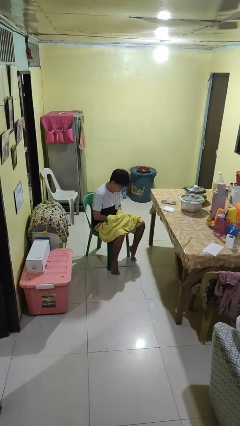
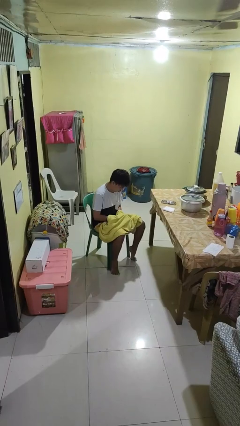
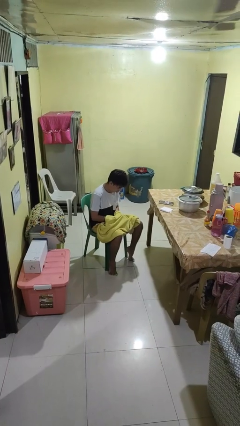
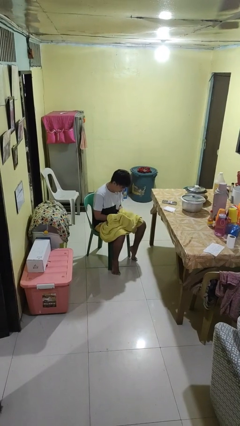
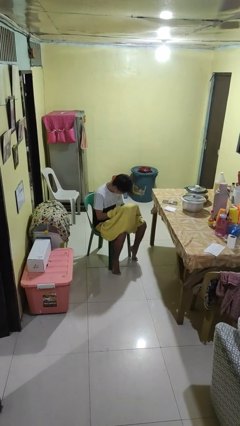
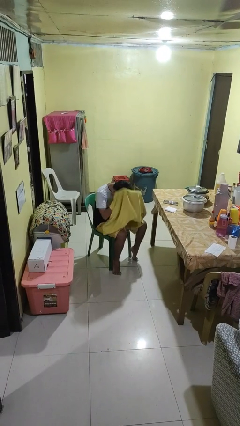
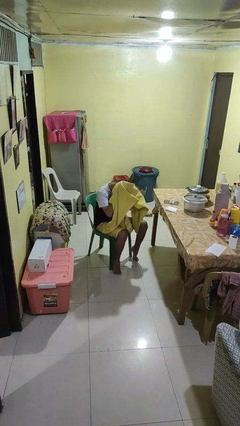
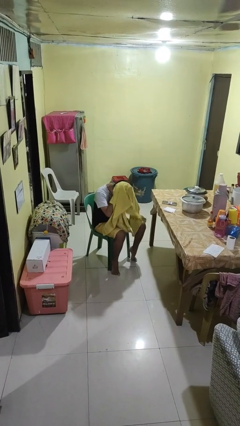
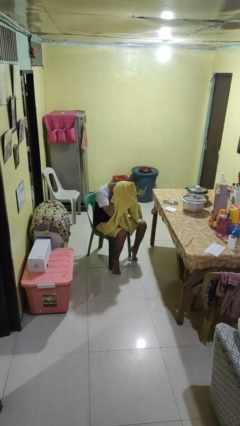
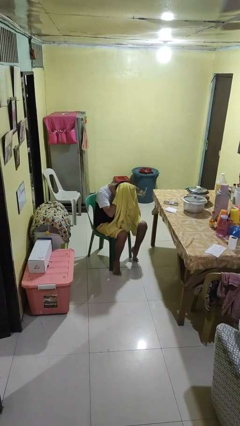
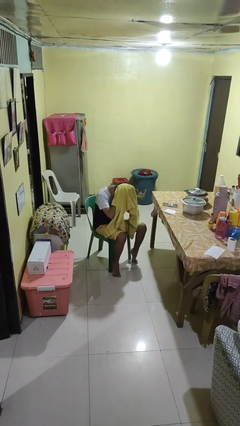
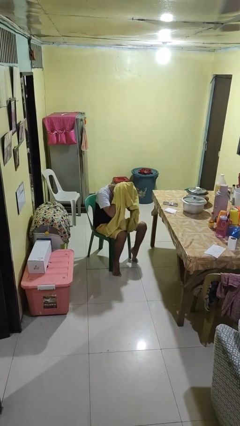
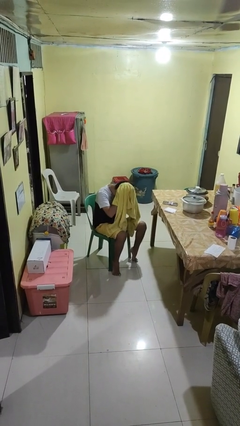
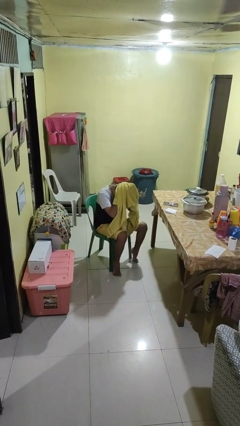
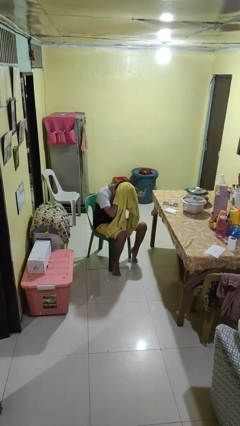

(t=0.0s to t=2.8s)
person dries hair with towel

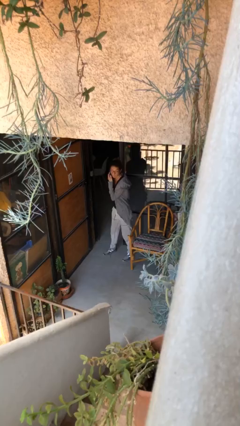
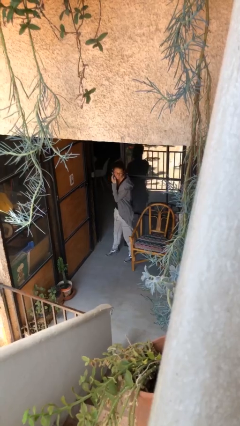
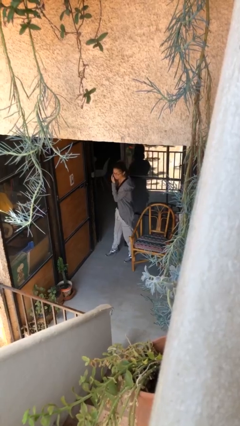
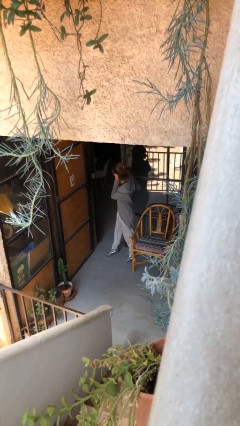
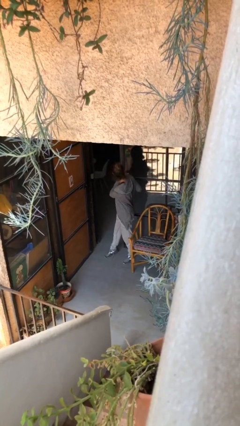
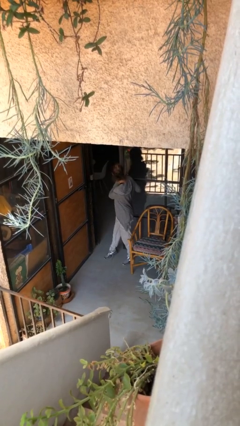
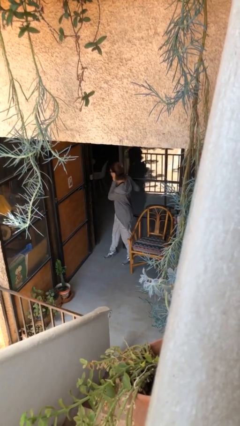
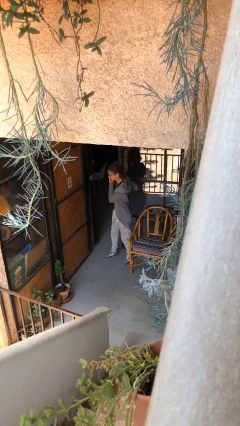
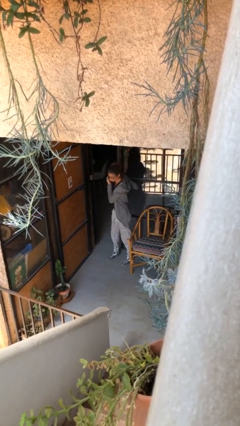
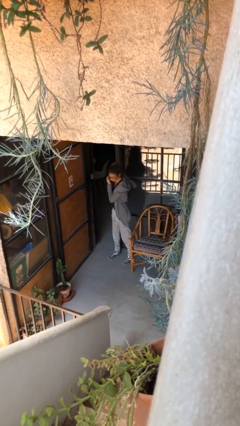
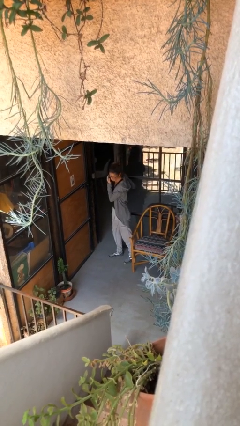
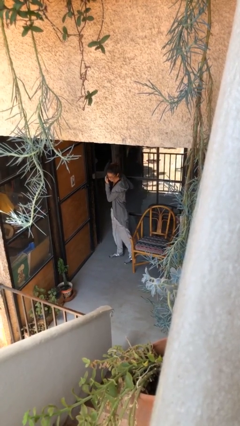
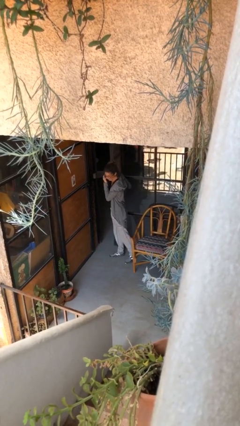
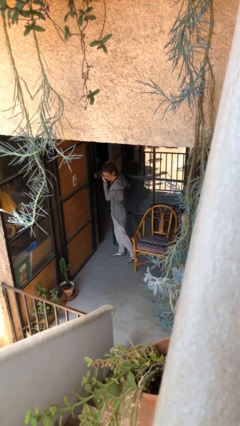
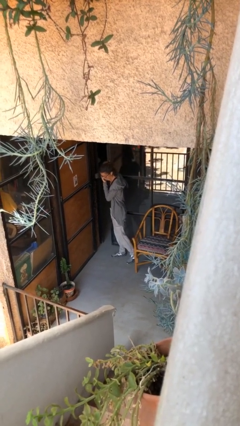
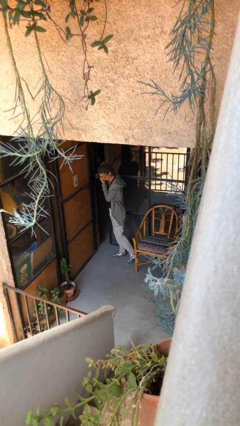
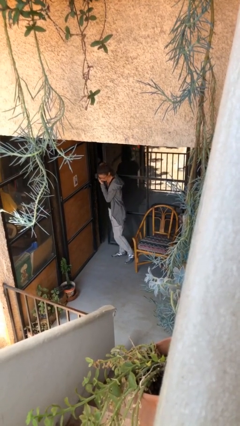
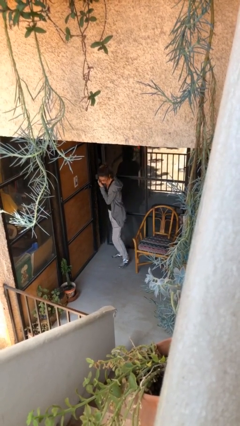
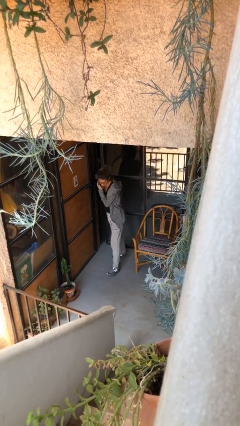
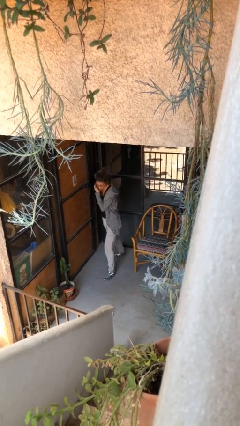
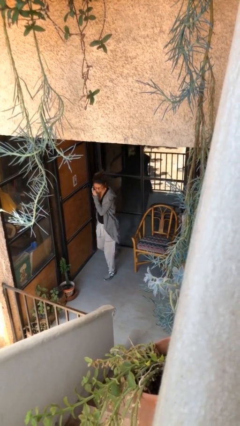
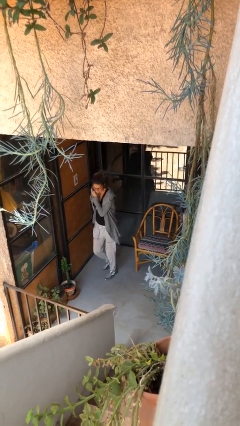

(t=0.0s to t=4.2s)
person closes facility door

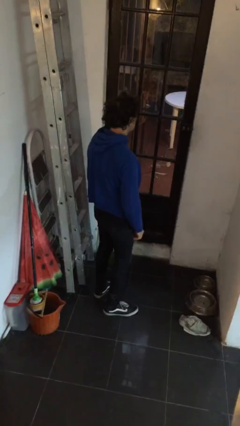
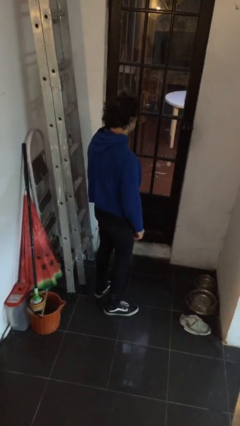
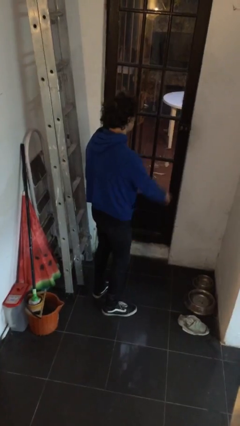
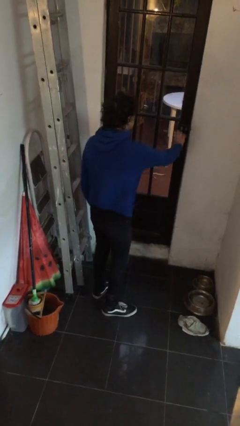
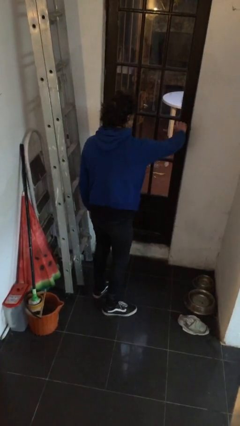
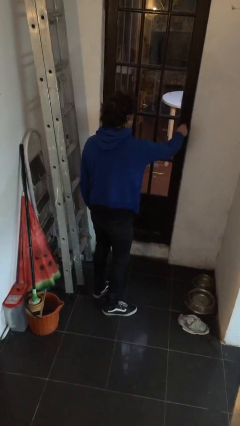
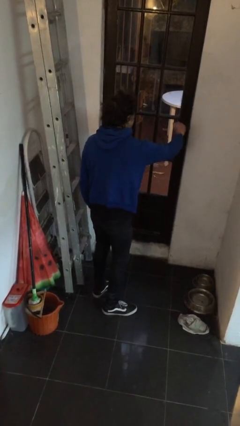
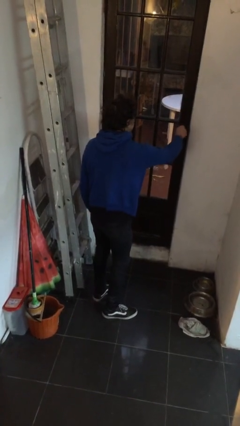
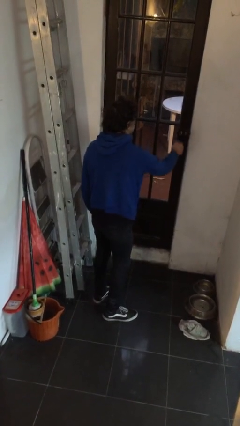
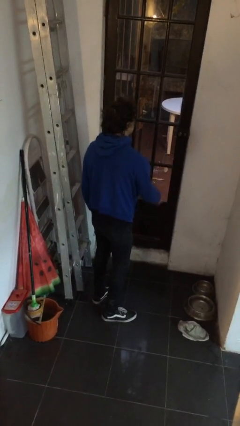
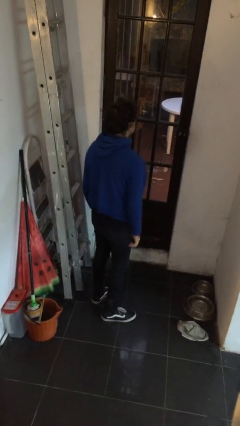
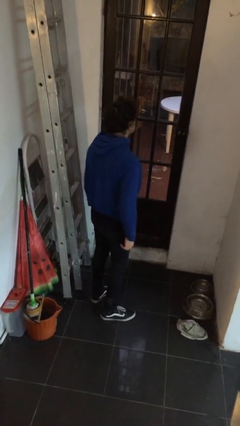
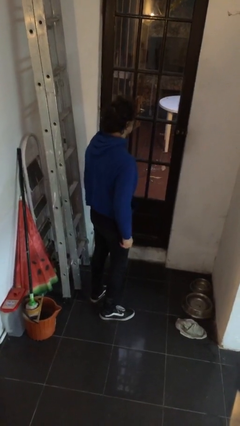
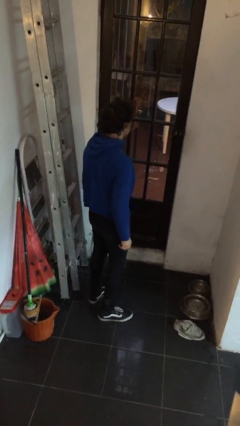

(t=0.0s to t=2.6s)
person locks door with keys

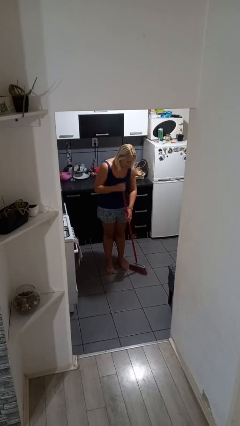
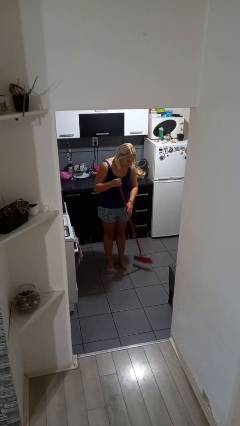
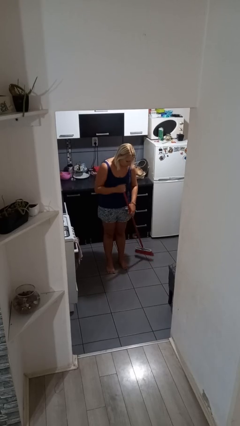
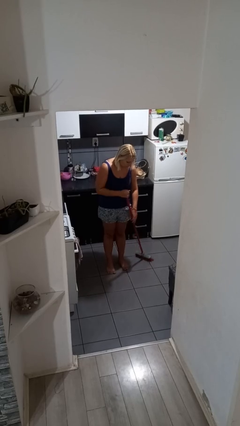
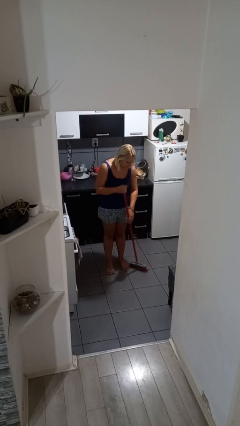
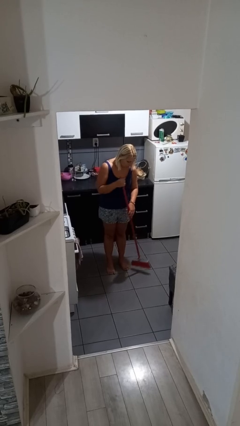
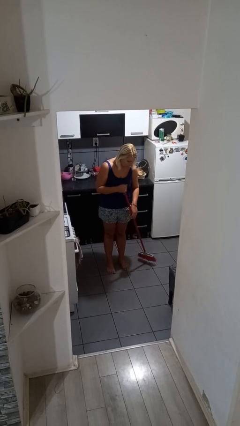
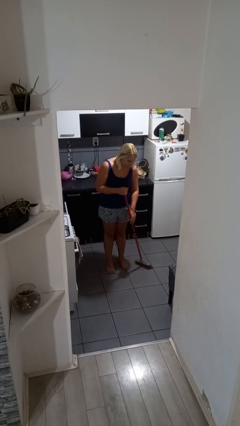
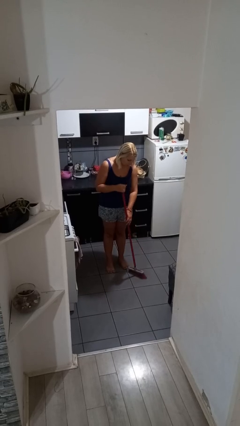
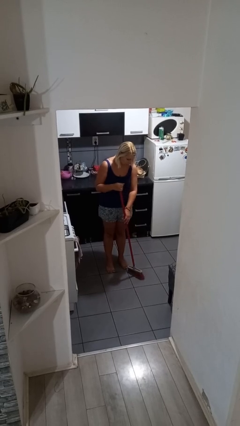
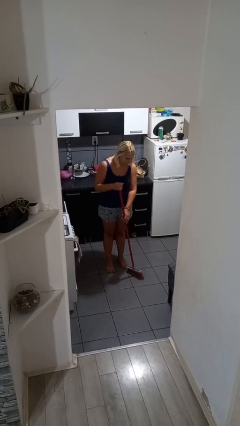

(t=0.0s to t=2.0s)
person sweeps floor

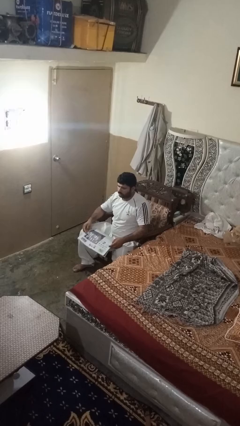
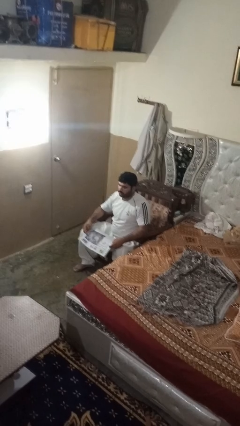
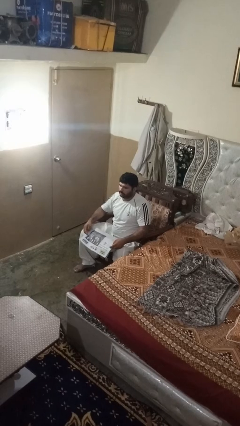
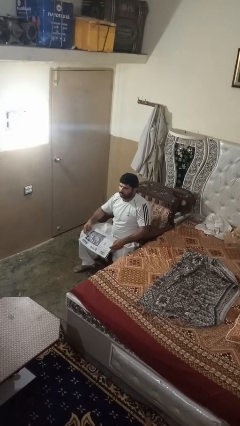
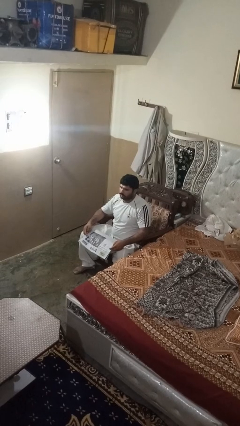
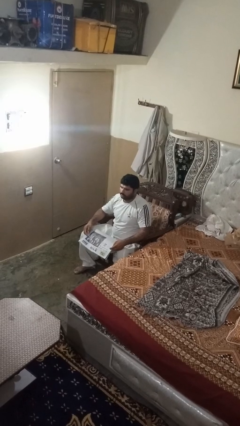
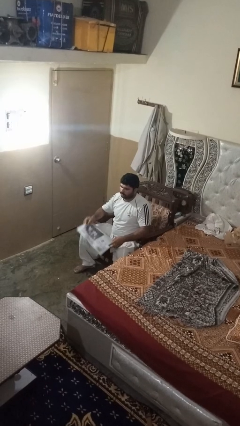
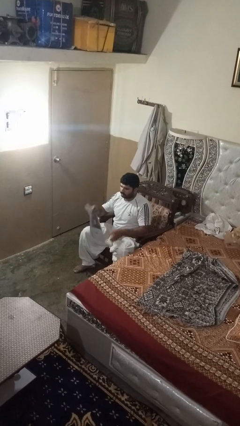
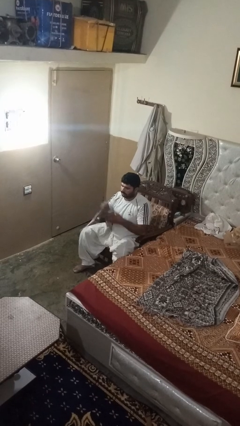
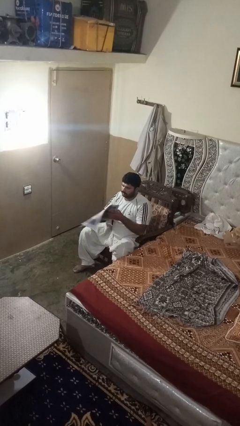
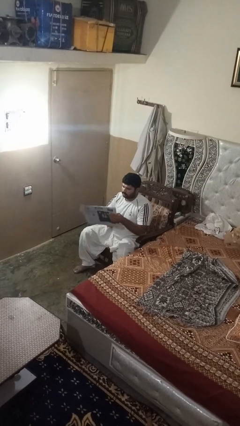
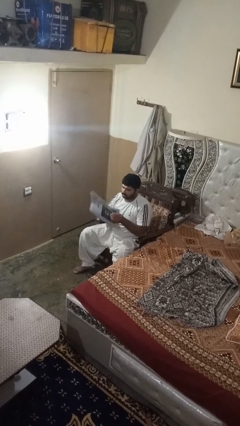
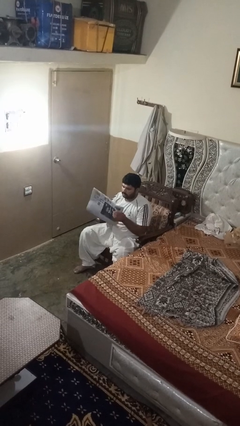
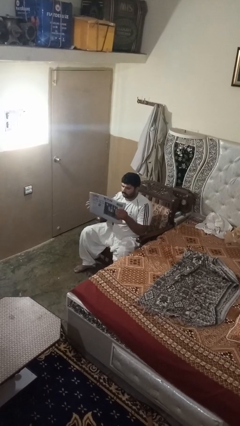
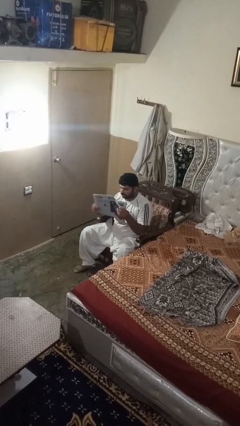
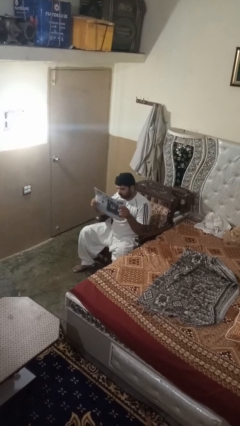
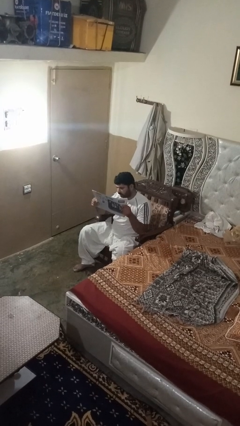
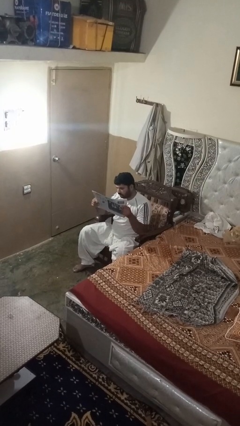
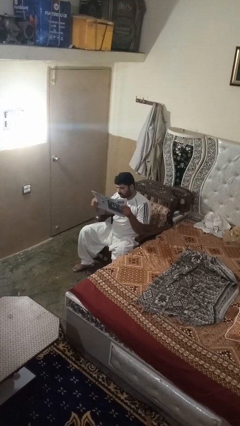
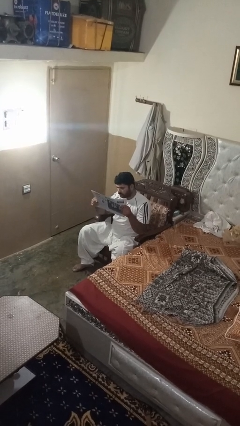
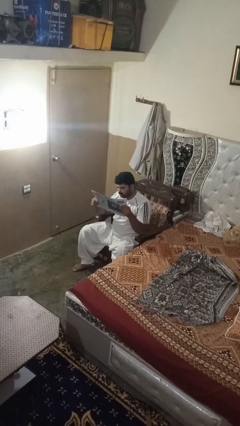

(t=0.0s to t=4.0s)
person reads newspaper

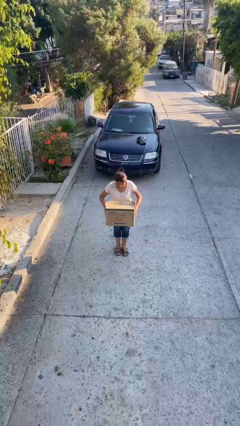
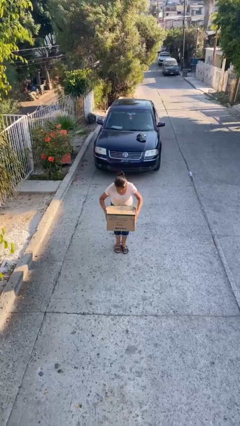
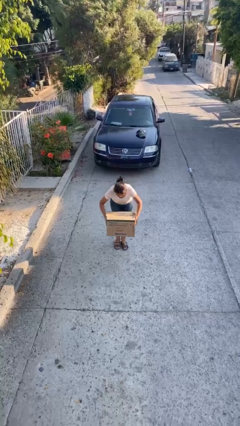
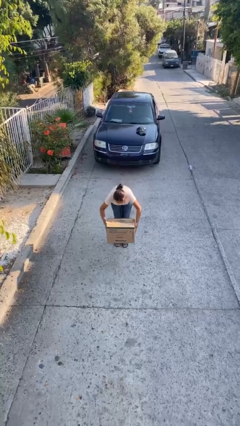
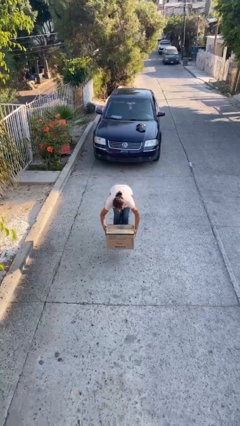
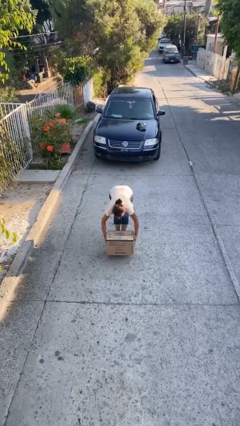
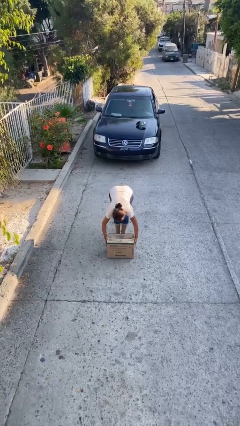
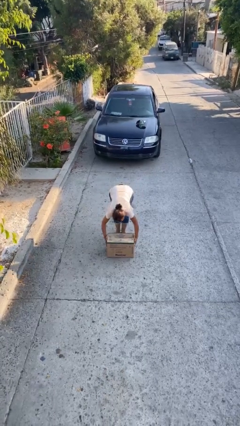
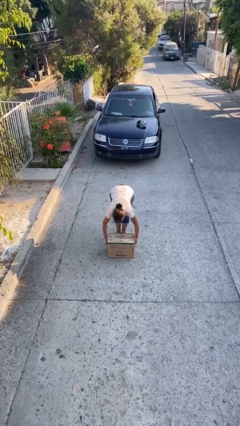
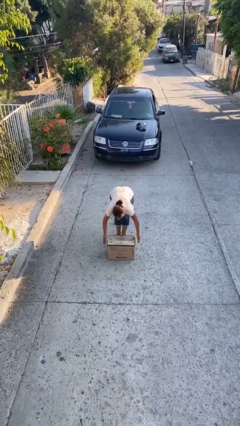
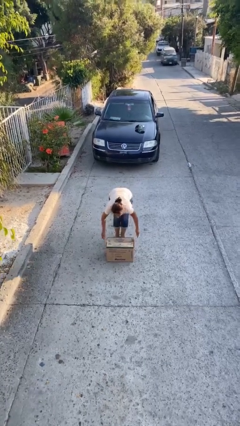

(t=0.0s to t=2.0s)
person puts down object on floor
